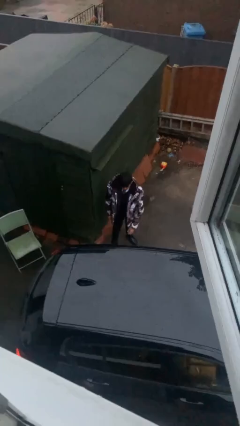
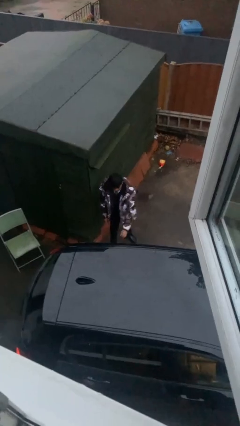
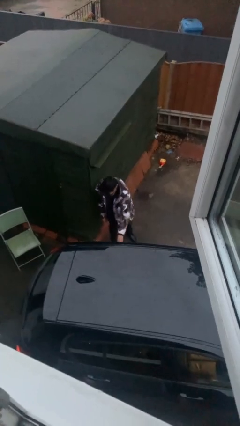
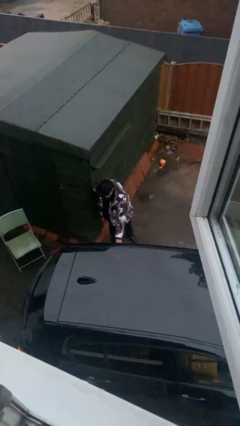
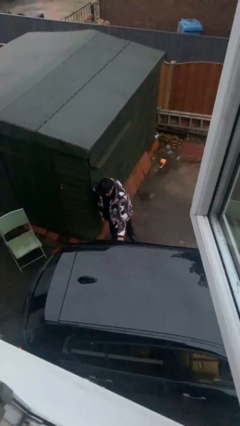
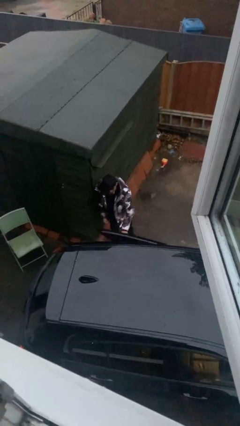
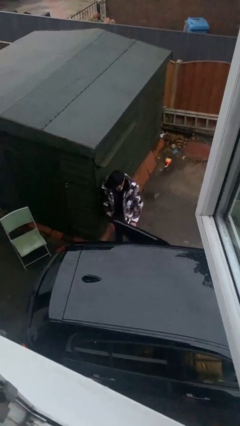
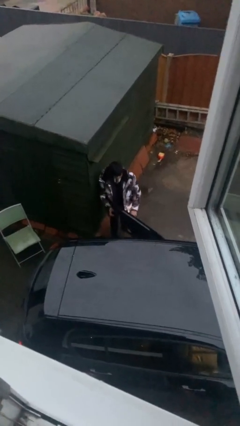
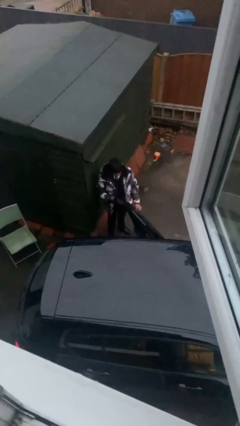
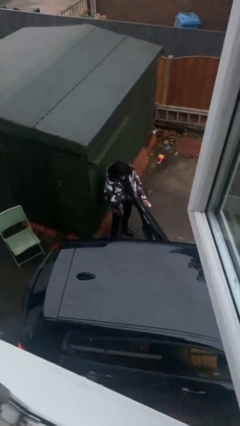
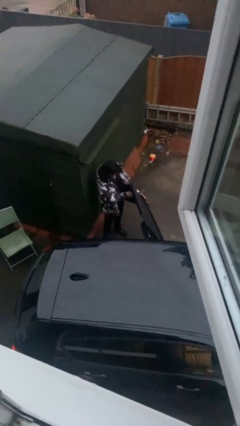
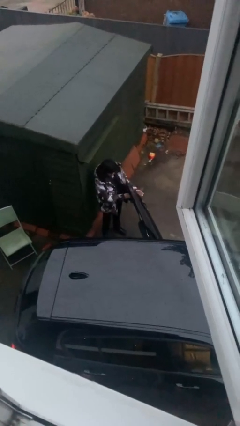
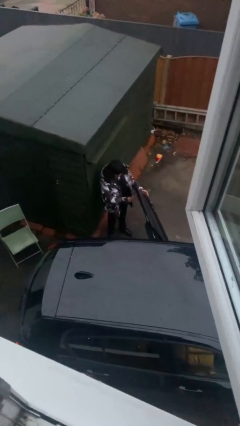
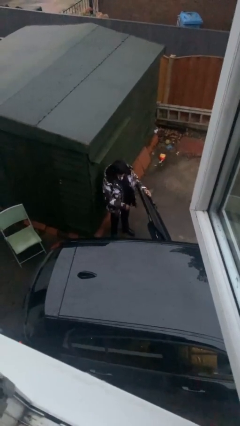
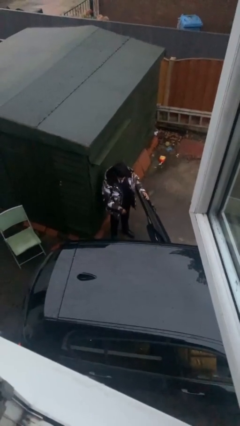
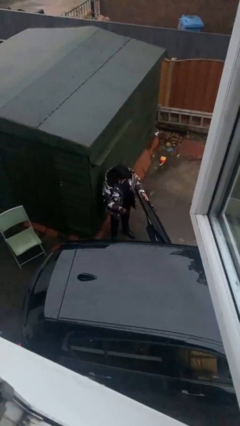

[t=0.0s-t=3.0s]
person opens car door

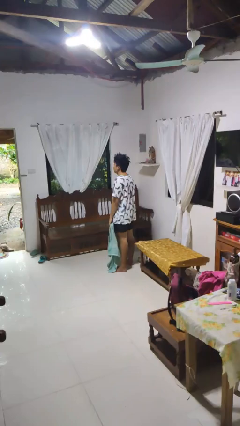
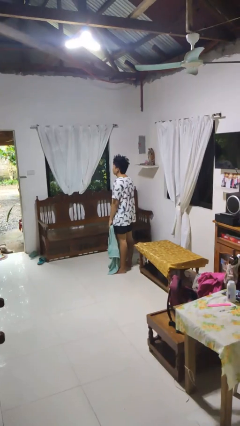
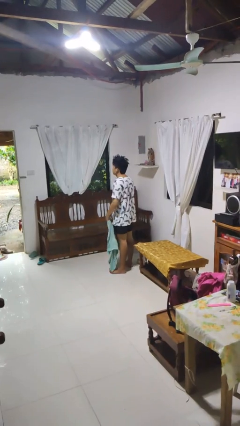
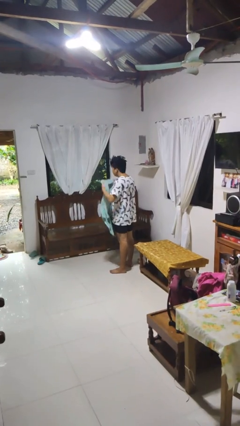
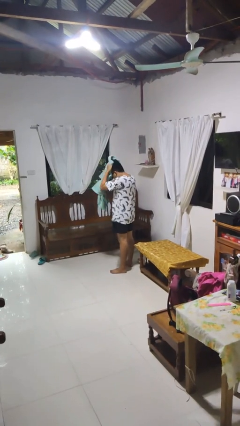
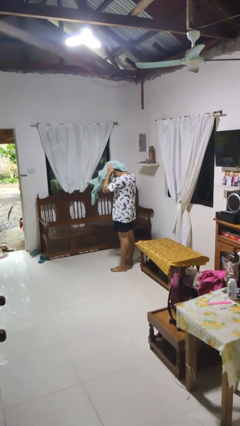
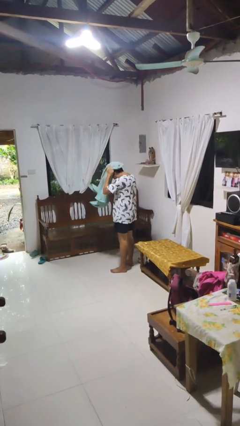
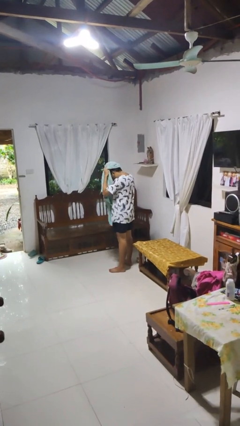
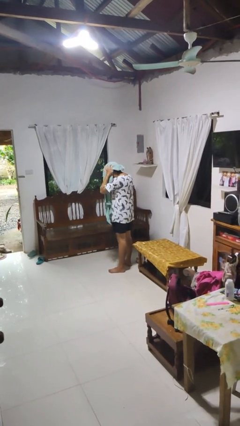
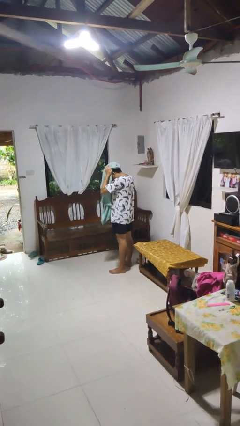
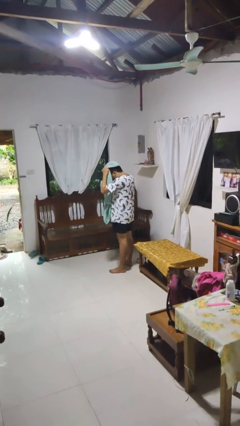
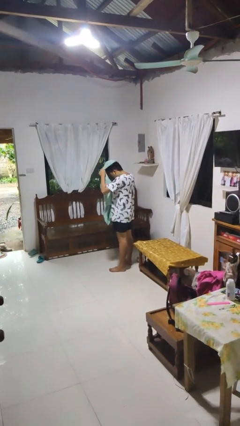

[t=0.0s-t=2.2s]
person dries hair with towel

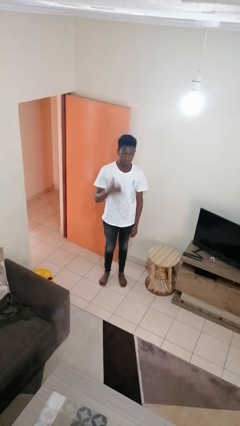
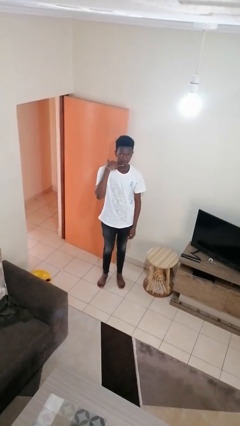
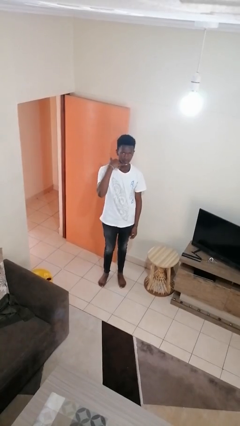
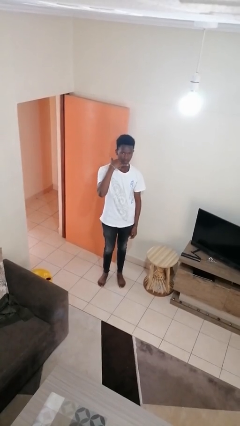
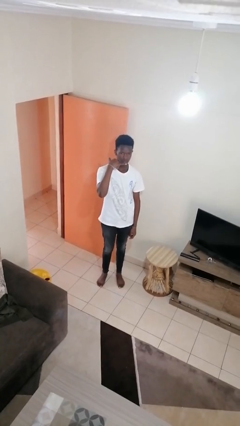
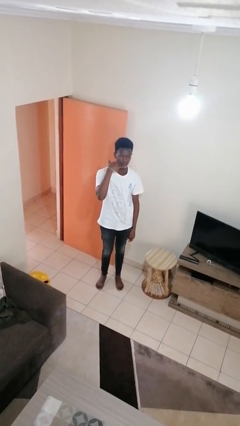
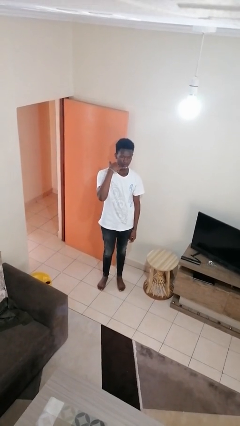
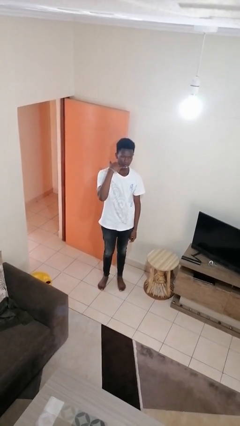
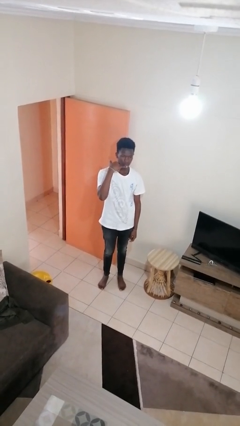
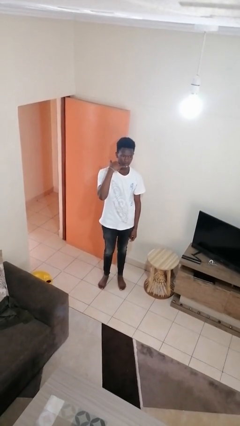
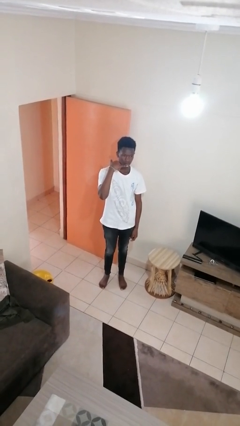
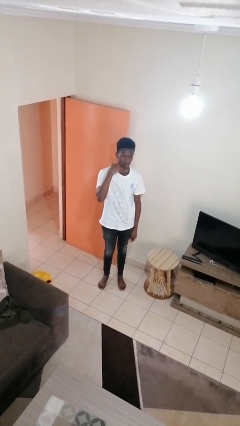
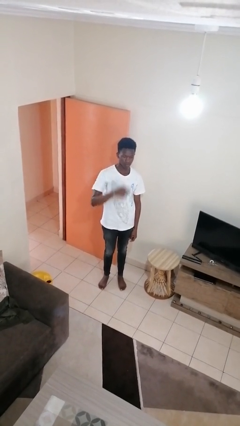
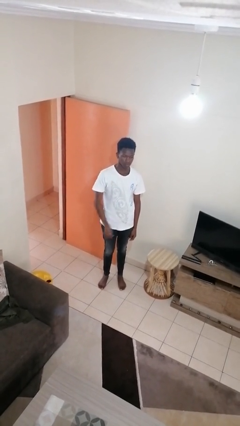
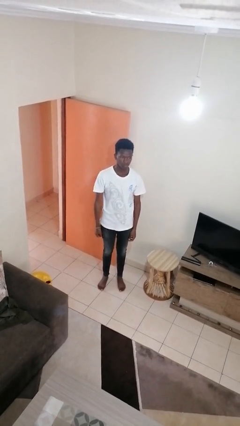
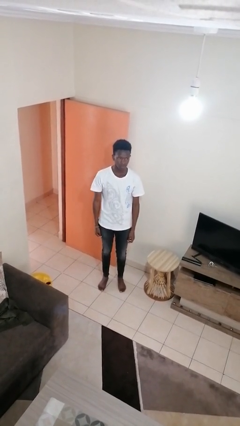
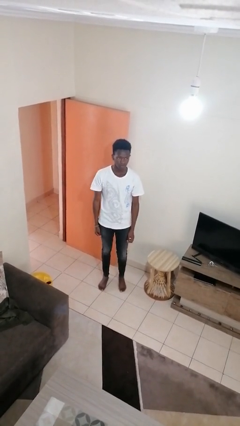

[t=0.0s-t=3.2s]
person gestures call me

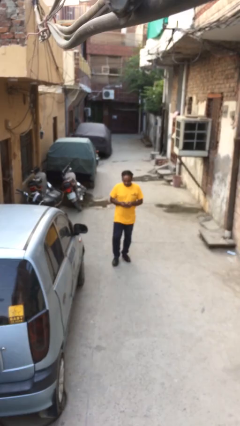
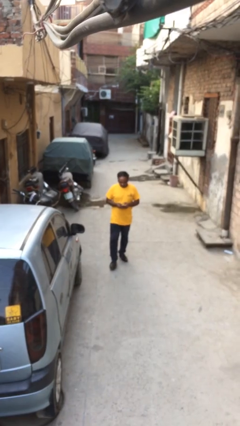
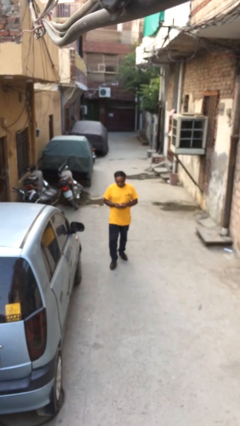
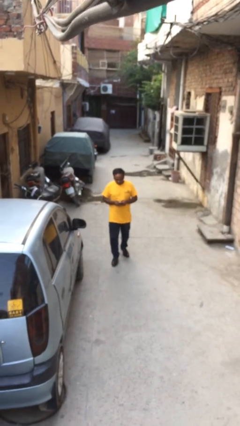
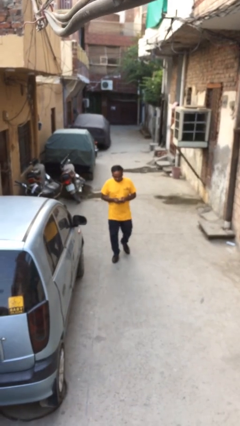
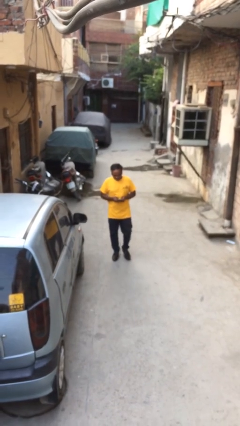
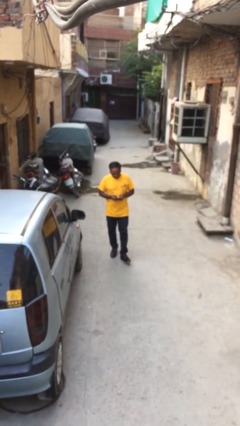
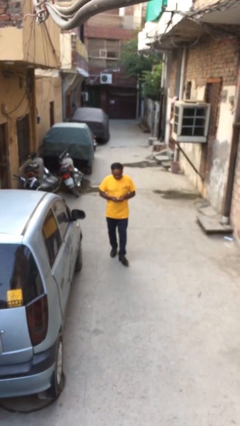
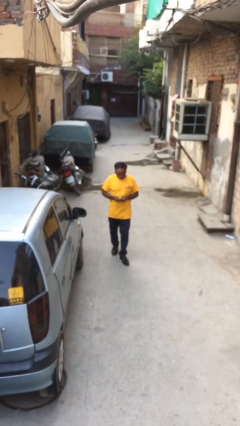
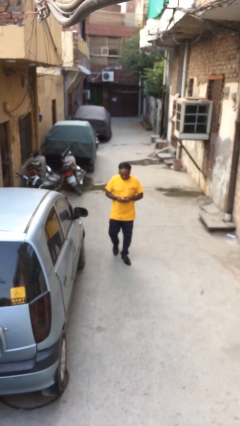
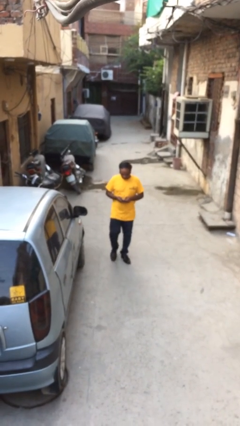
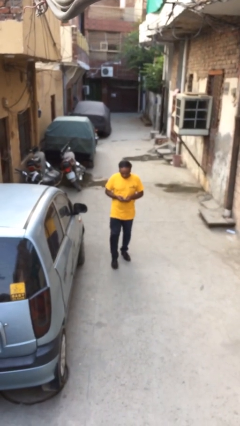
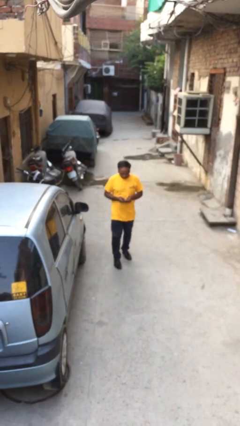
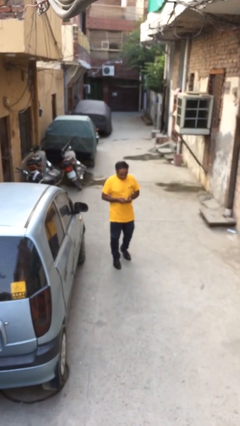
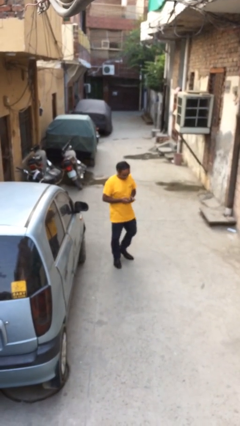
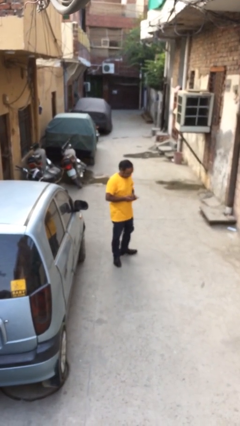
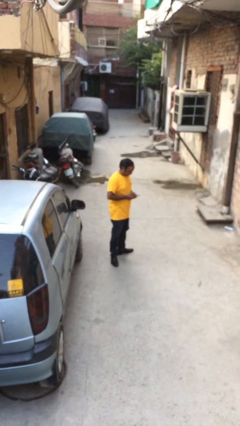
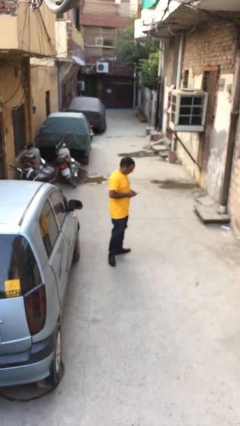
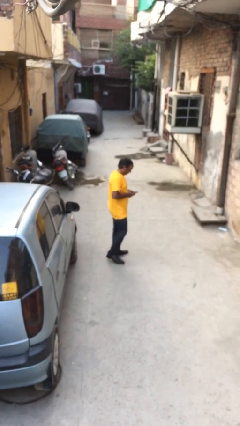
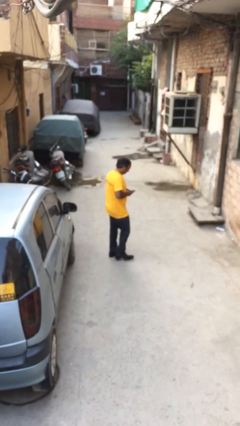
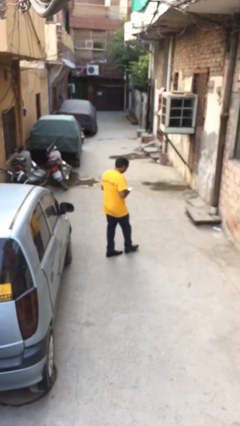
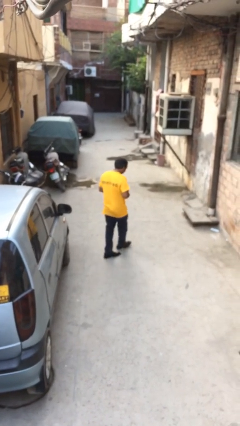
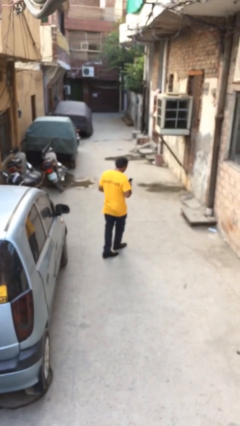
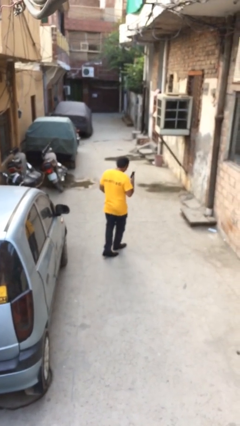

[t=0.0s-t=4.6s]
person texts on phone

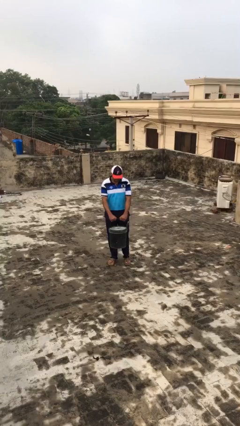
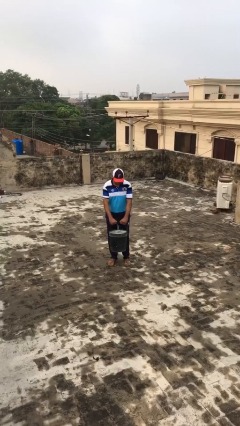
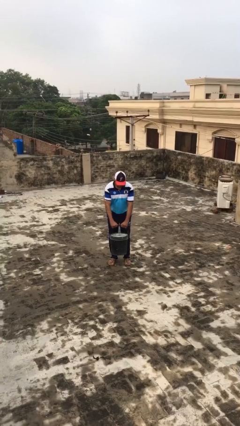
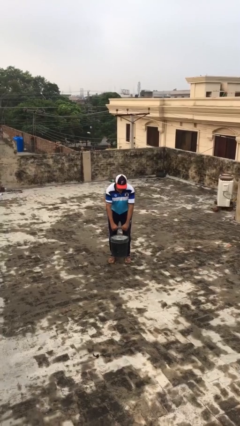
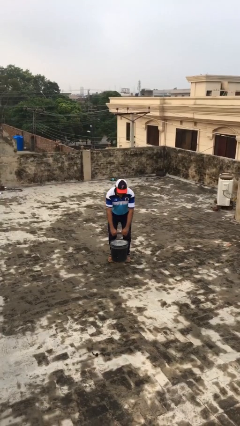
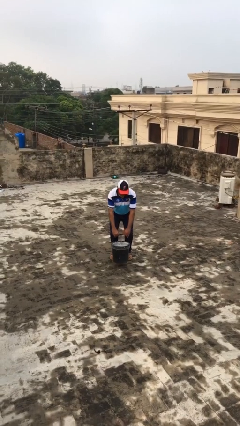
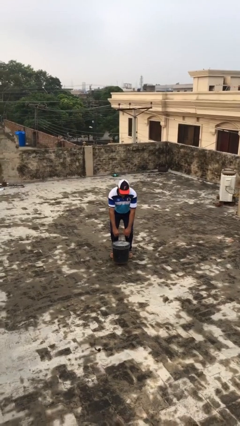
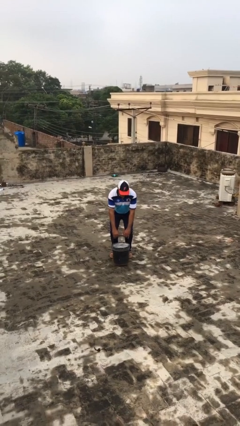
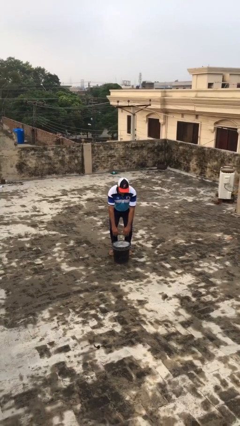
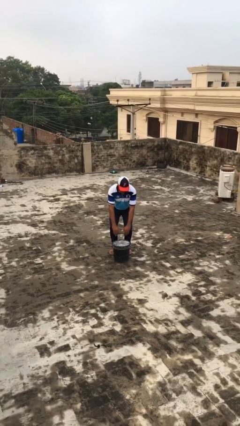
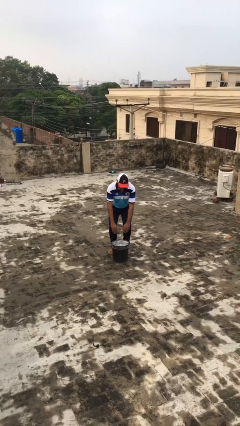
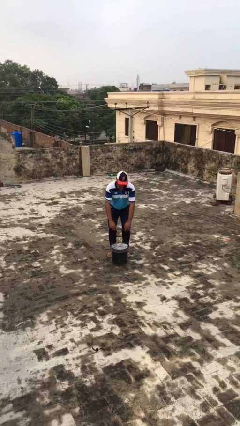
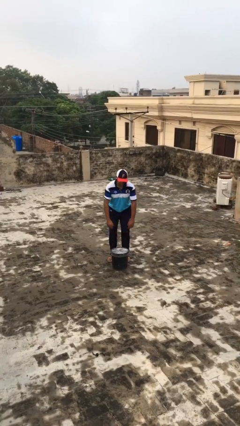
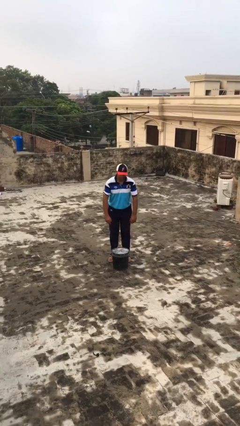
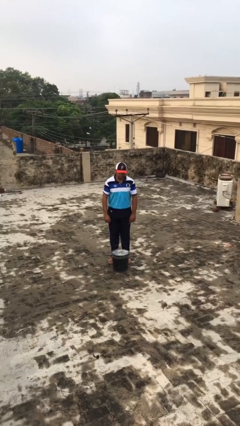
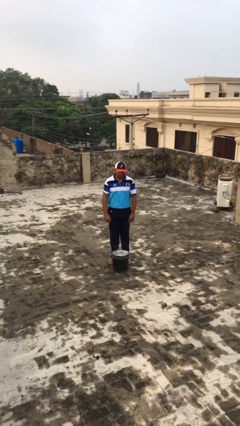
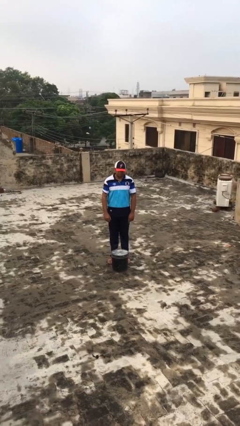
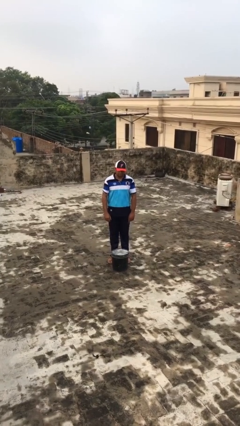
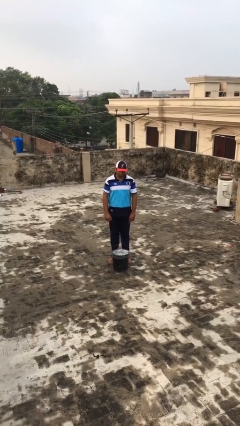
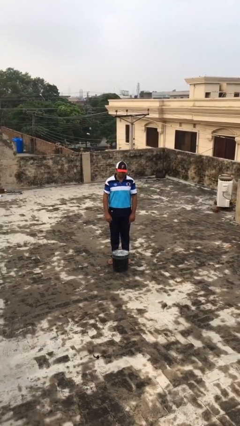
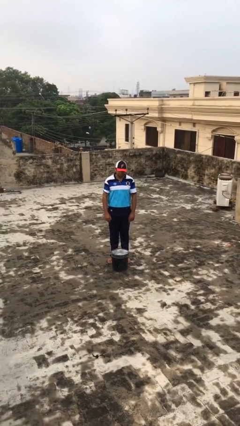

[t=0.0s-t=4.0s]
person puts down object on floor

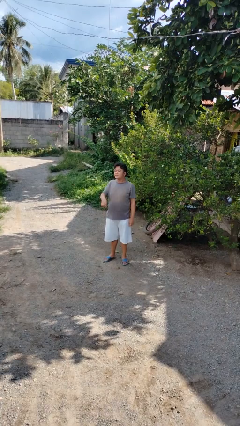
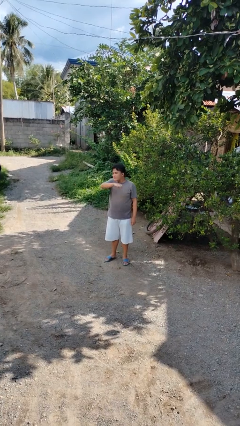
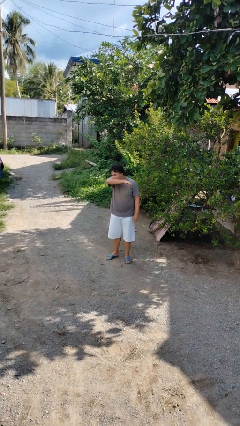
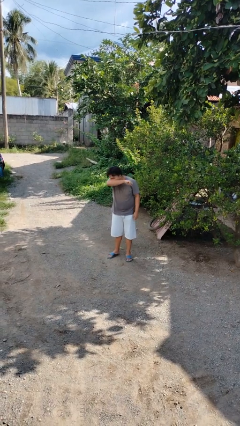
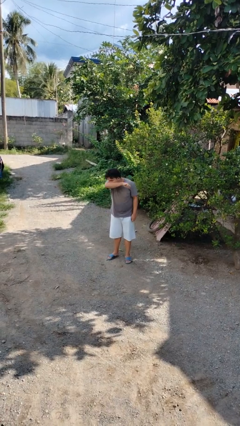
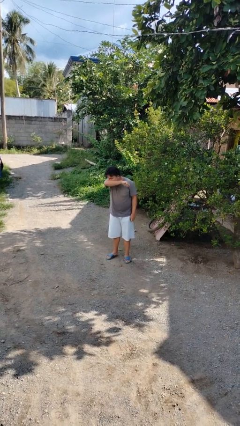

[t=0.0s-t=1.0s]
person sneezes into arm
